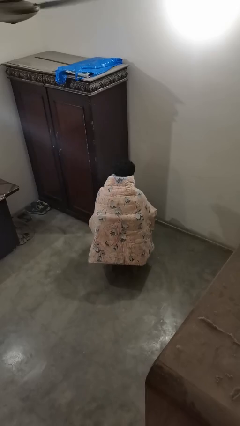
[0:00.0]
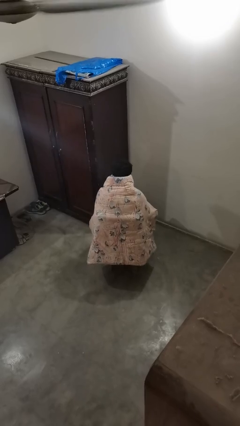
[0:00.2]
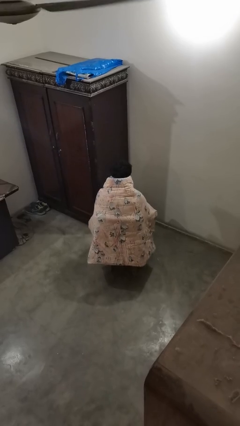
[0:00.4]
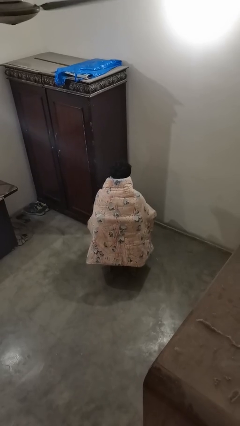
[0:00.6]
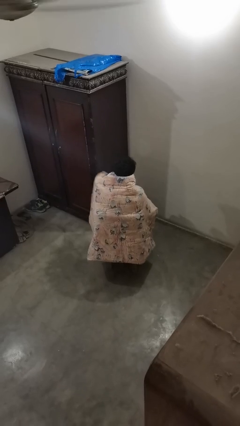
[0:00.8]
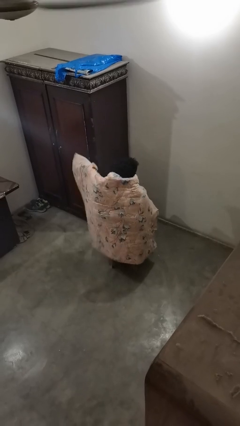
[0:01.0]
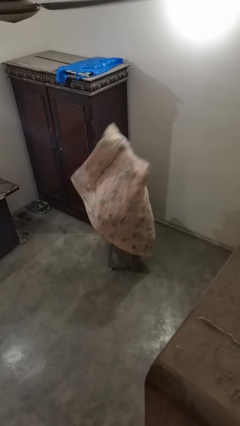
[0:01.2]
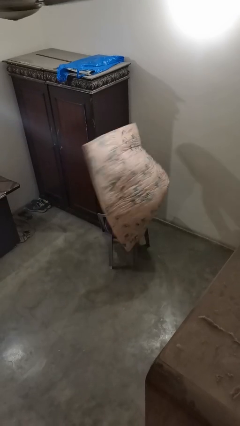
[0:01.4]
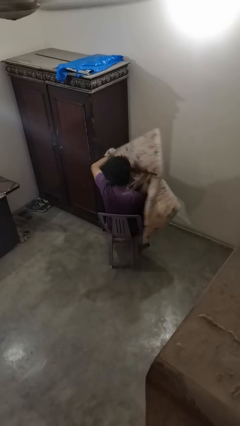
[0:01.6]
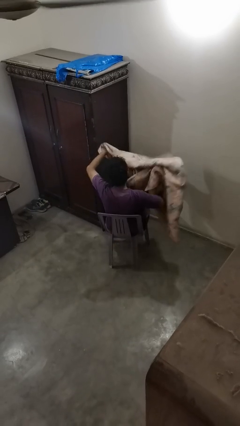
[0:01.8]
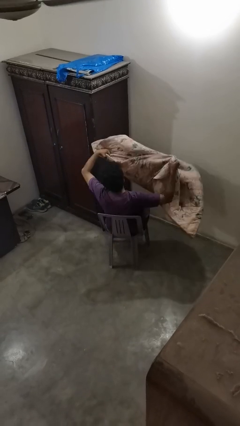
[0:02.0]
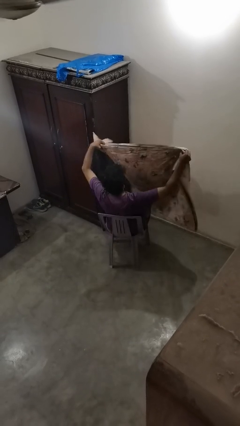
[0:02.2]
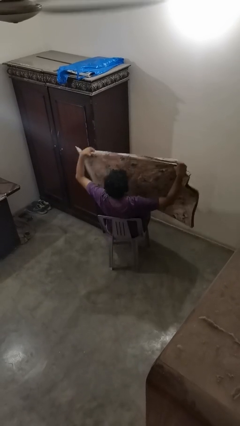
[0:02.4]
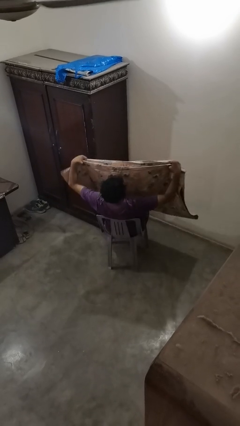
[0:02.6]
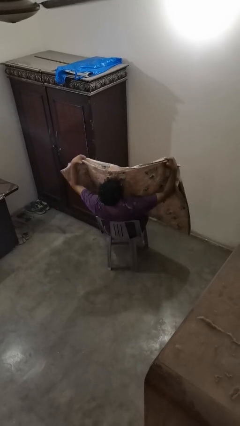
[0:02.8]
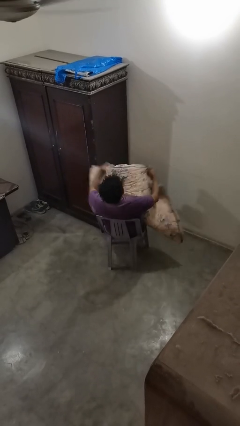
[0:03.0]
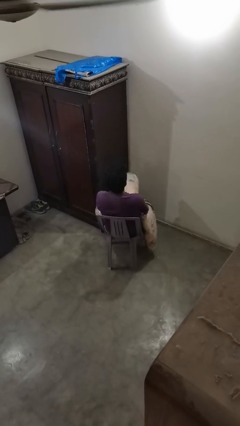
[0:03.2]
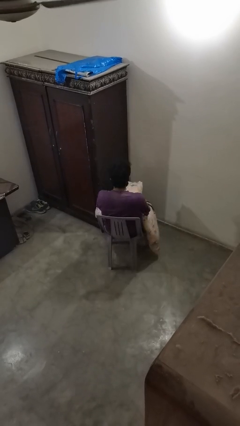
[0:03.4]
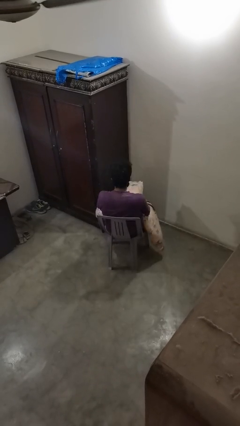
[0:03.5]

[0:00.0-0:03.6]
person uncovers with blanket

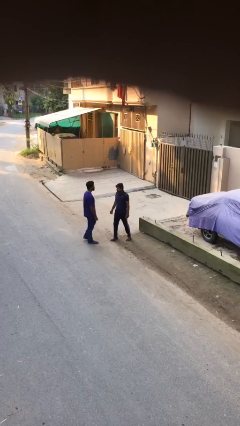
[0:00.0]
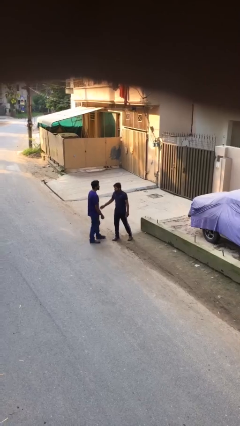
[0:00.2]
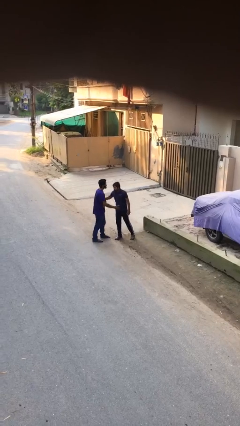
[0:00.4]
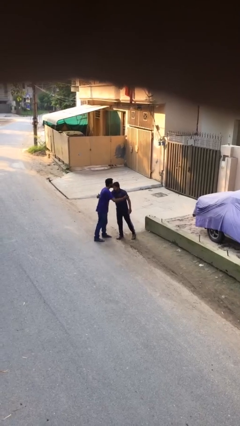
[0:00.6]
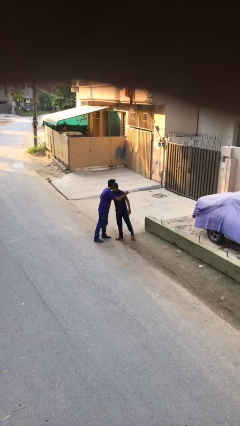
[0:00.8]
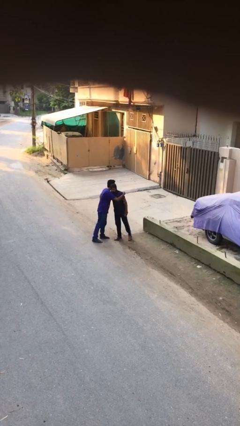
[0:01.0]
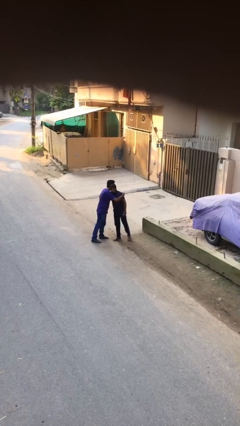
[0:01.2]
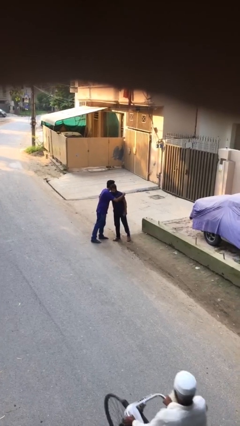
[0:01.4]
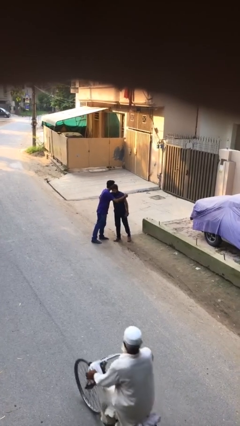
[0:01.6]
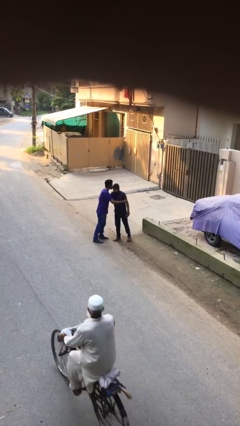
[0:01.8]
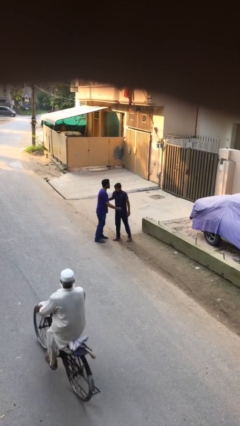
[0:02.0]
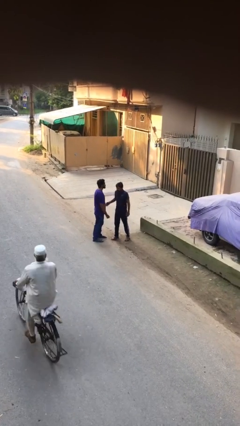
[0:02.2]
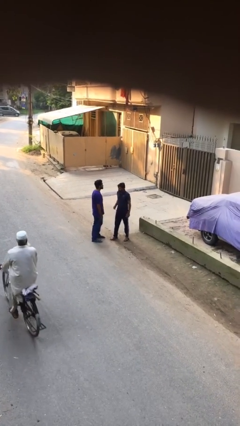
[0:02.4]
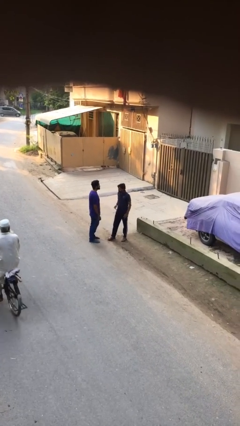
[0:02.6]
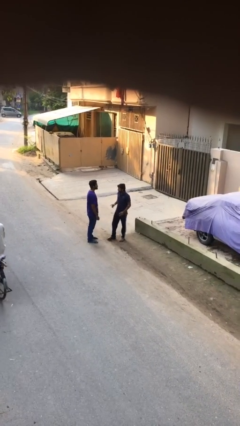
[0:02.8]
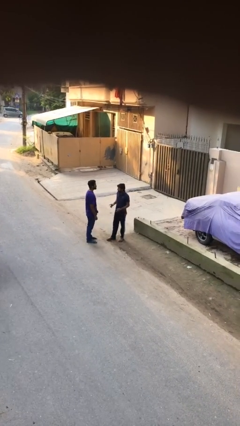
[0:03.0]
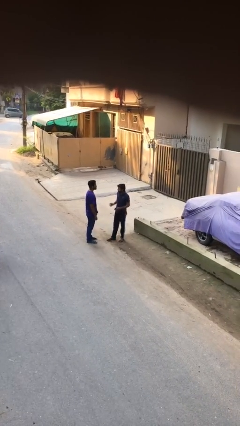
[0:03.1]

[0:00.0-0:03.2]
person embraces person

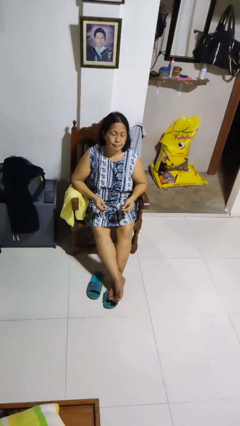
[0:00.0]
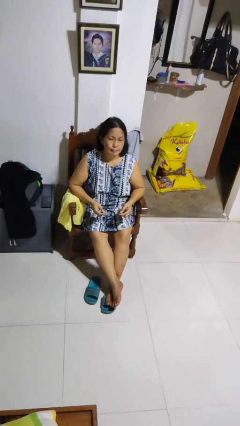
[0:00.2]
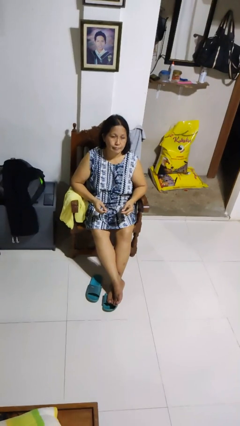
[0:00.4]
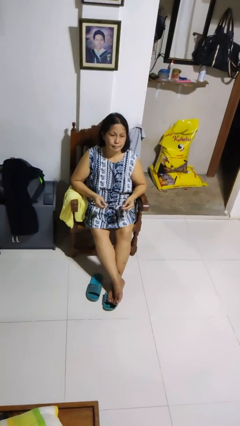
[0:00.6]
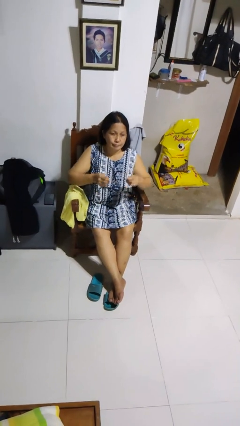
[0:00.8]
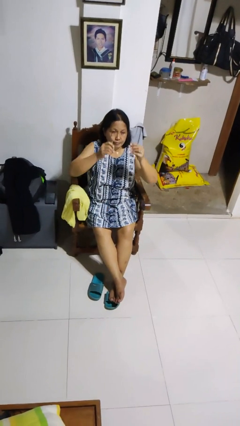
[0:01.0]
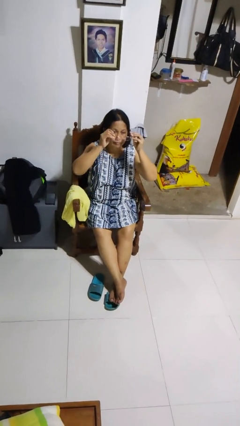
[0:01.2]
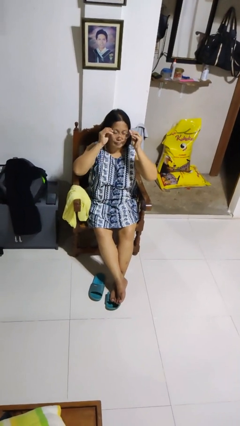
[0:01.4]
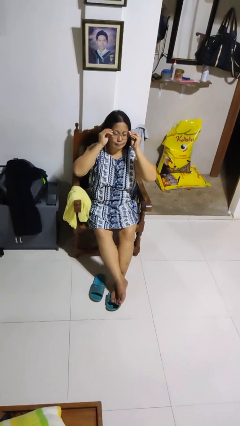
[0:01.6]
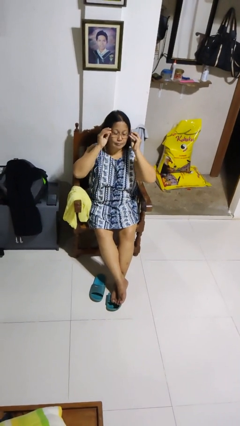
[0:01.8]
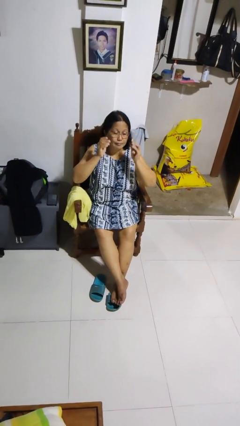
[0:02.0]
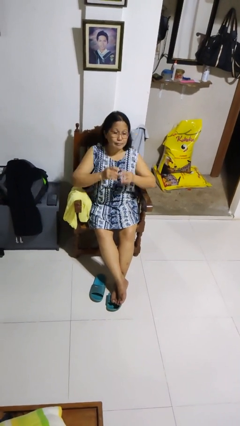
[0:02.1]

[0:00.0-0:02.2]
person puts on glasses

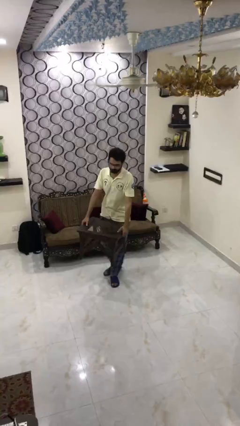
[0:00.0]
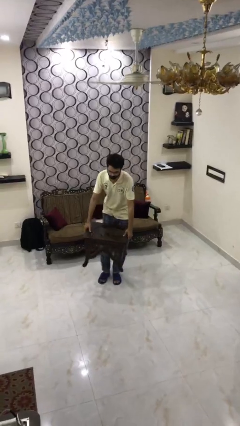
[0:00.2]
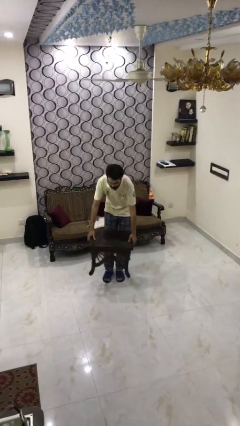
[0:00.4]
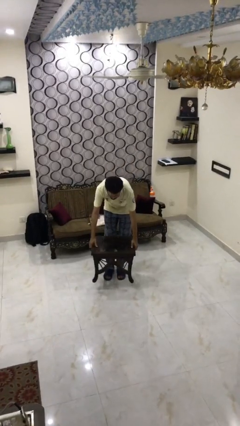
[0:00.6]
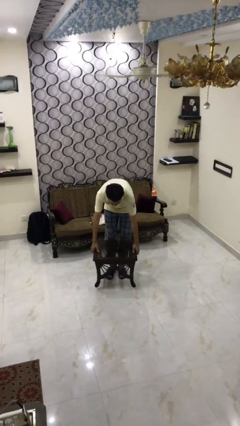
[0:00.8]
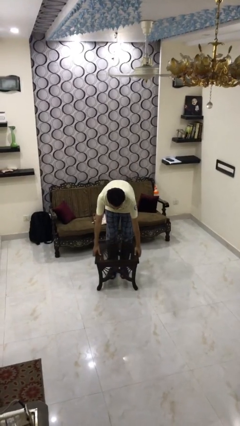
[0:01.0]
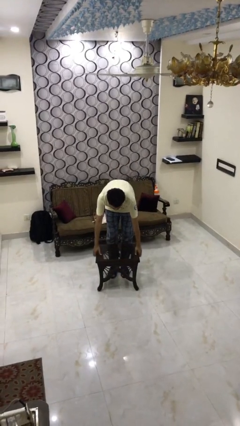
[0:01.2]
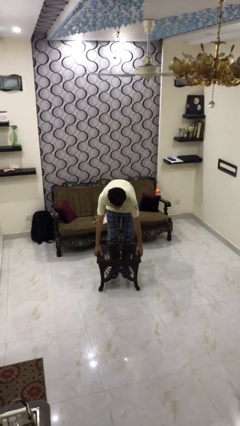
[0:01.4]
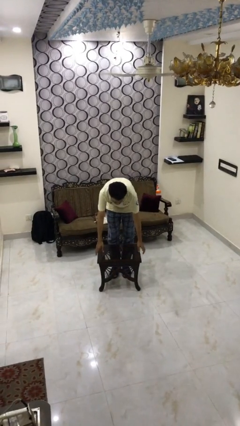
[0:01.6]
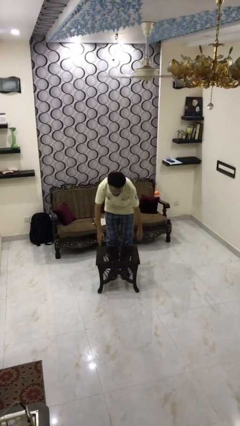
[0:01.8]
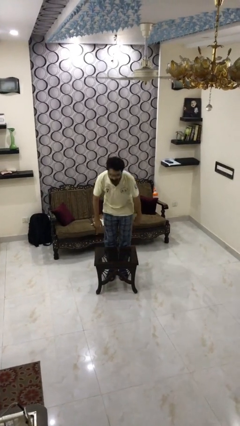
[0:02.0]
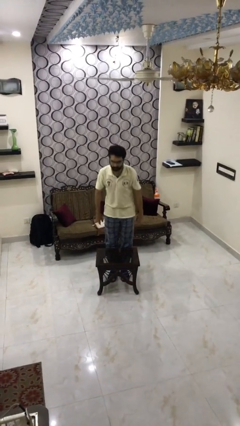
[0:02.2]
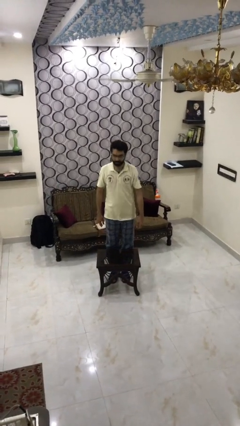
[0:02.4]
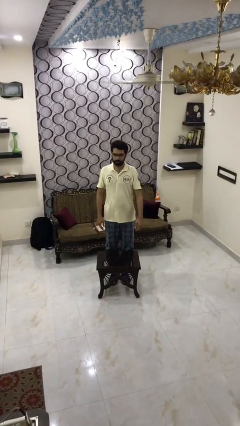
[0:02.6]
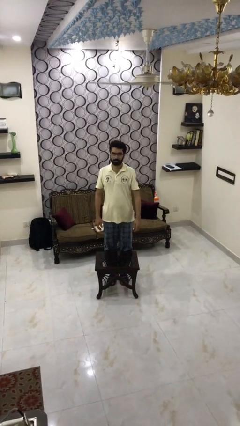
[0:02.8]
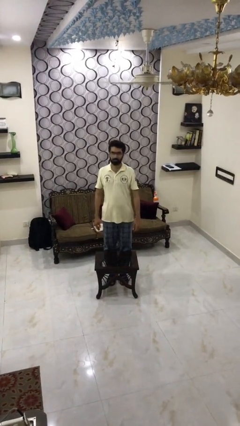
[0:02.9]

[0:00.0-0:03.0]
person puts down object on floor

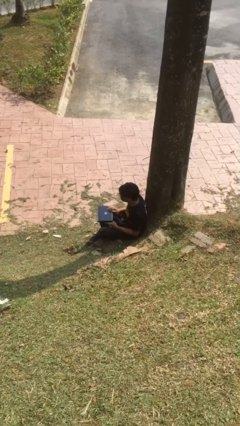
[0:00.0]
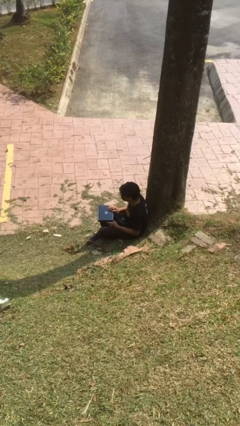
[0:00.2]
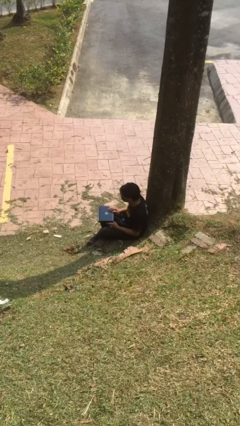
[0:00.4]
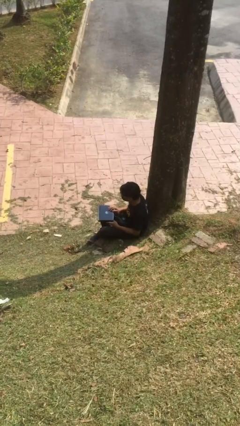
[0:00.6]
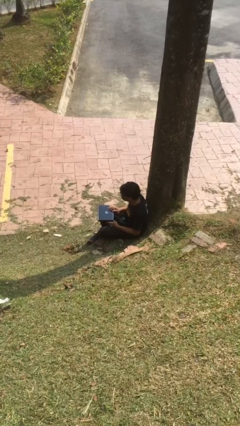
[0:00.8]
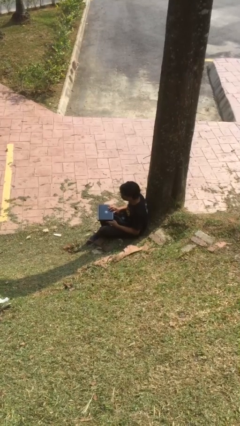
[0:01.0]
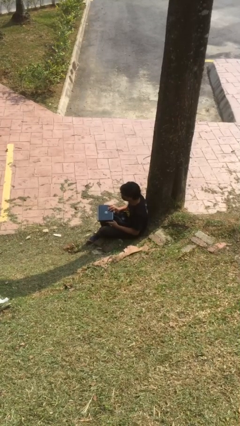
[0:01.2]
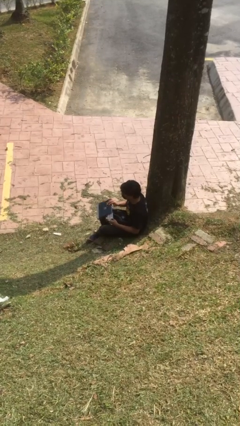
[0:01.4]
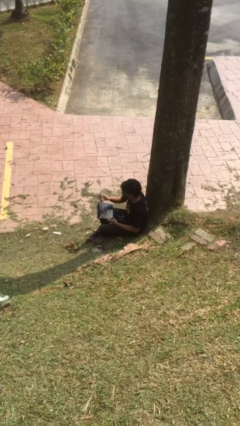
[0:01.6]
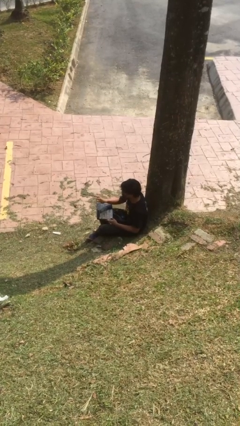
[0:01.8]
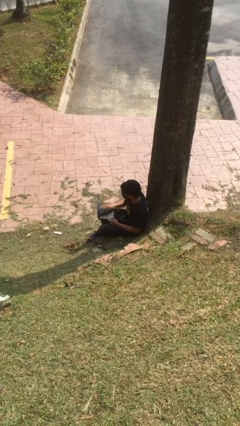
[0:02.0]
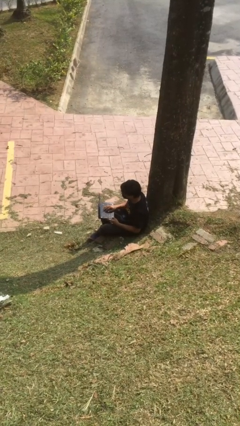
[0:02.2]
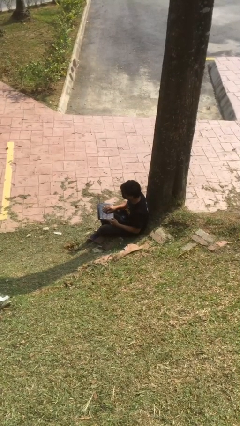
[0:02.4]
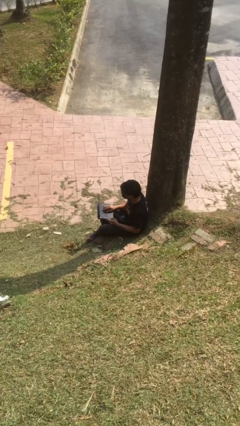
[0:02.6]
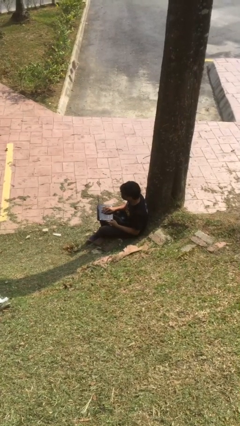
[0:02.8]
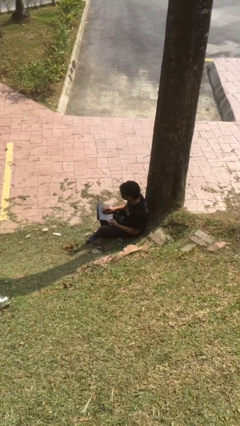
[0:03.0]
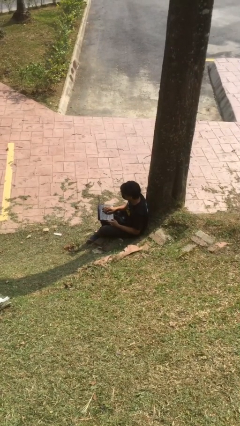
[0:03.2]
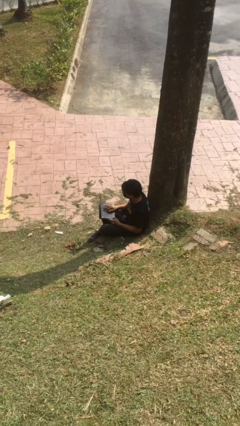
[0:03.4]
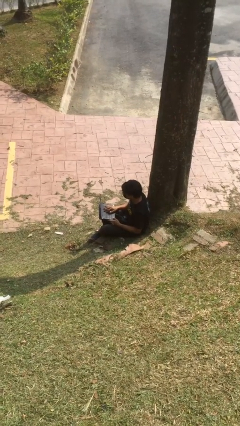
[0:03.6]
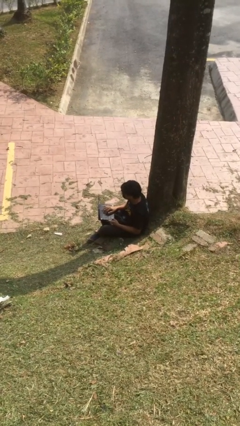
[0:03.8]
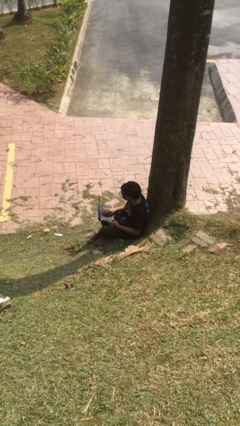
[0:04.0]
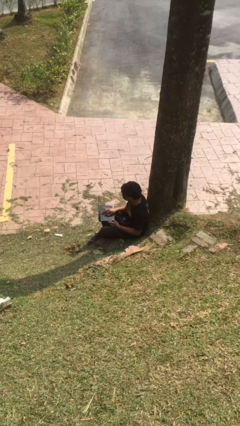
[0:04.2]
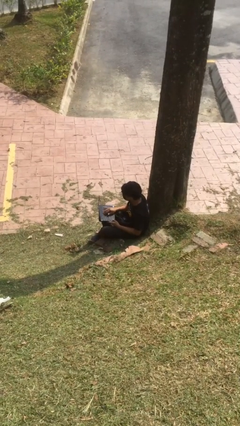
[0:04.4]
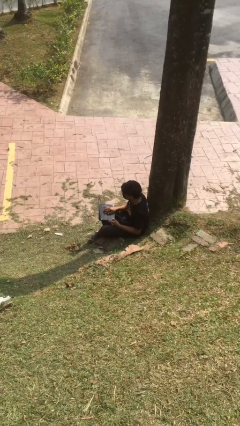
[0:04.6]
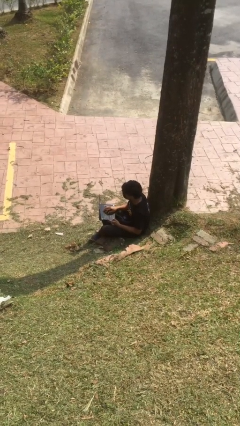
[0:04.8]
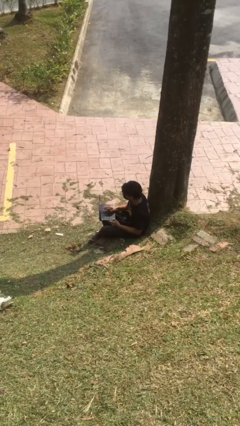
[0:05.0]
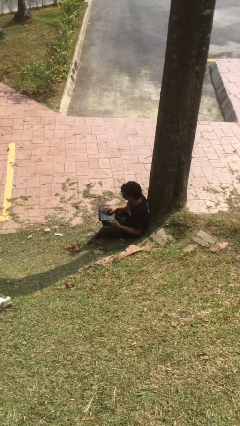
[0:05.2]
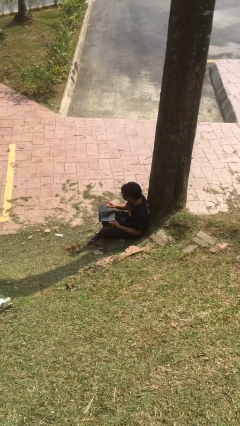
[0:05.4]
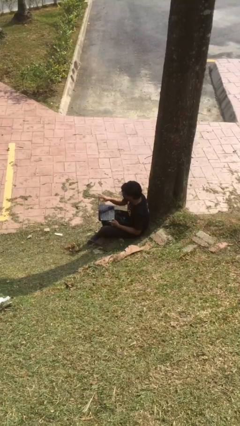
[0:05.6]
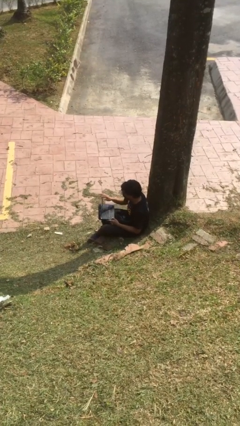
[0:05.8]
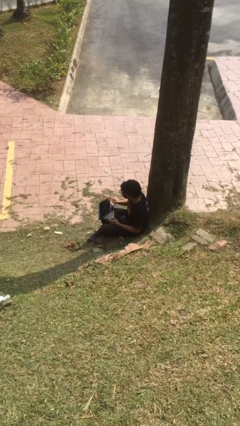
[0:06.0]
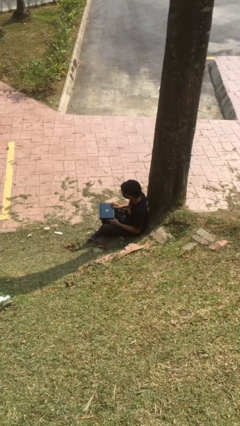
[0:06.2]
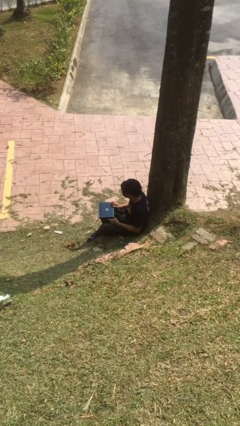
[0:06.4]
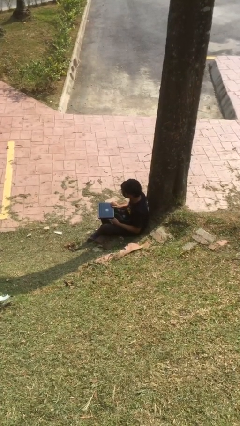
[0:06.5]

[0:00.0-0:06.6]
person interacts with laptop
